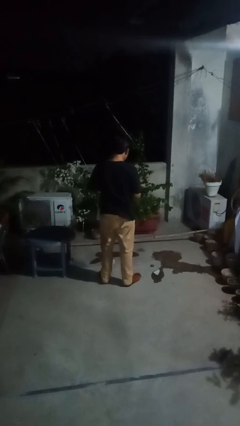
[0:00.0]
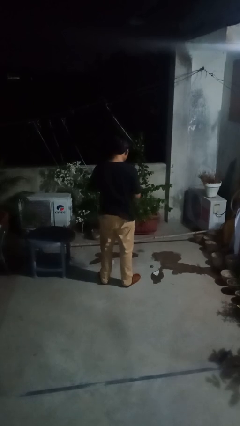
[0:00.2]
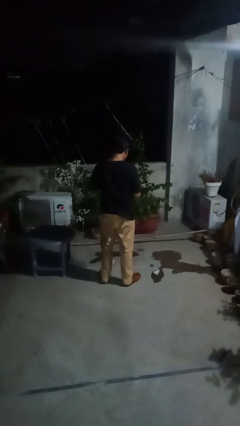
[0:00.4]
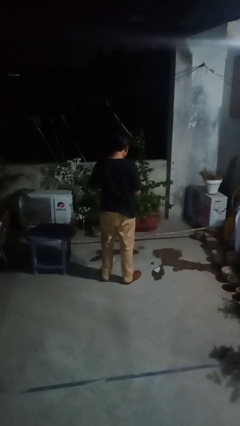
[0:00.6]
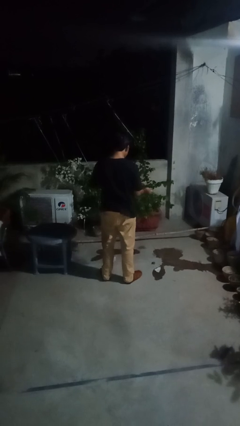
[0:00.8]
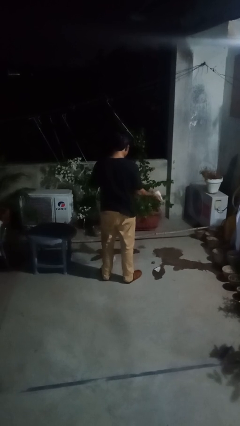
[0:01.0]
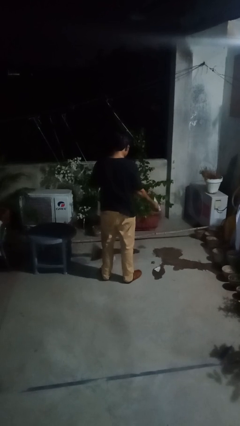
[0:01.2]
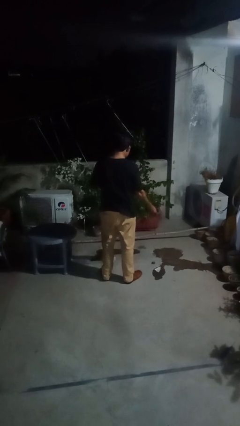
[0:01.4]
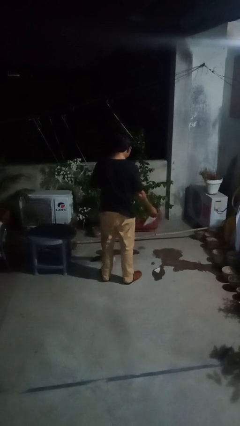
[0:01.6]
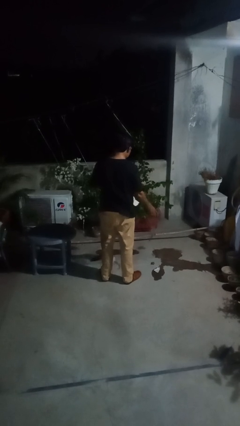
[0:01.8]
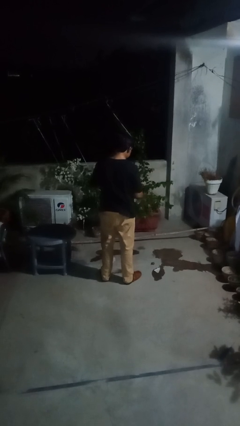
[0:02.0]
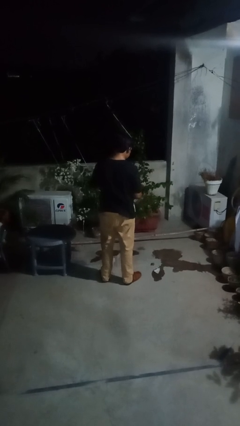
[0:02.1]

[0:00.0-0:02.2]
person tears paper

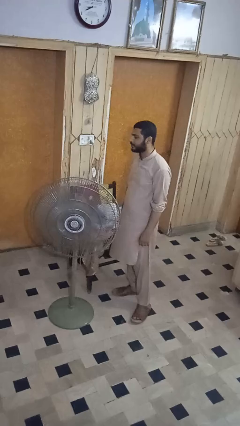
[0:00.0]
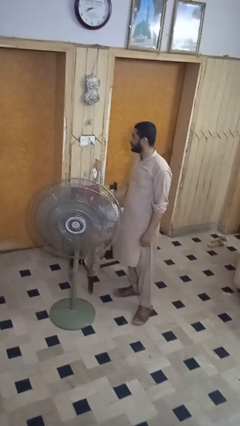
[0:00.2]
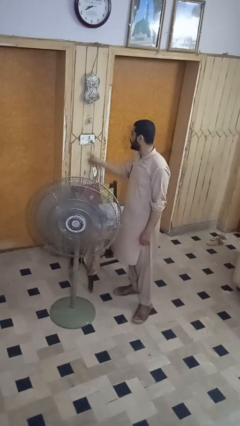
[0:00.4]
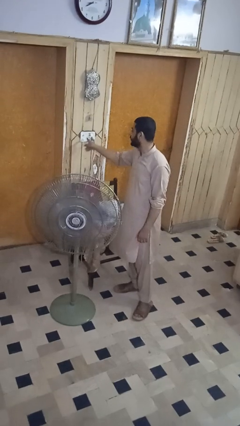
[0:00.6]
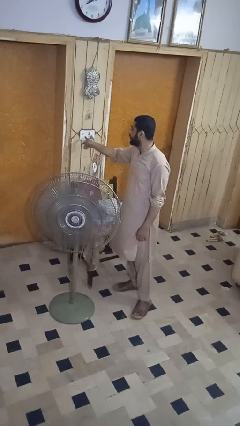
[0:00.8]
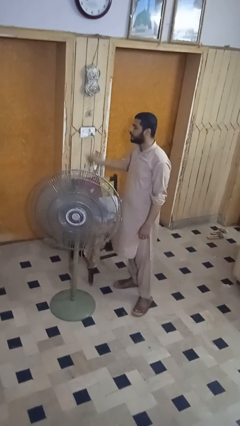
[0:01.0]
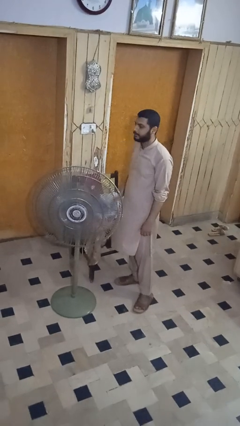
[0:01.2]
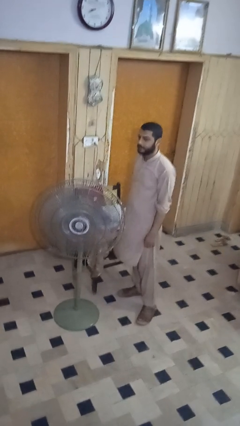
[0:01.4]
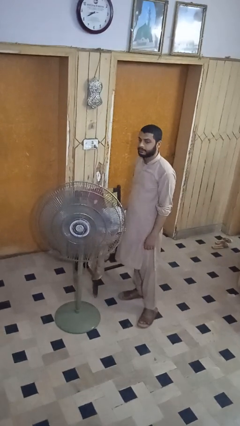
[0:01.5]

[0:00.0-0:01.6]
person turns off fan

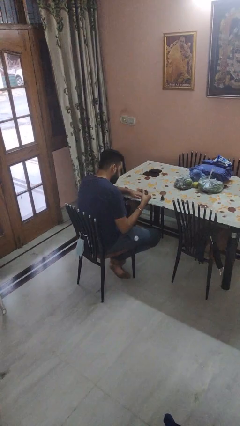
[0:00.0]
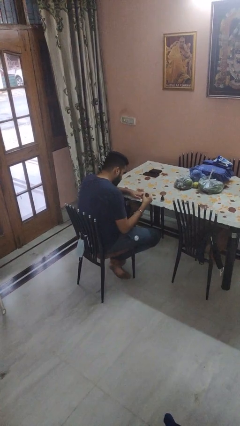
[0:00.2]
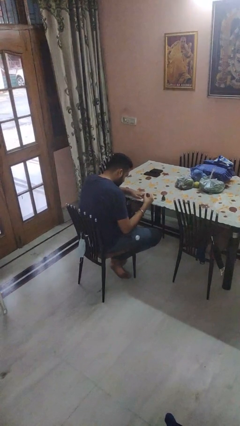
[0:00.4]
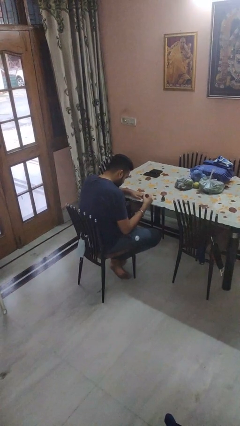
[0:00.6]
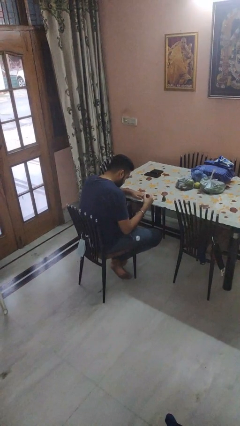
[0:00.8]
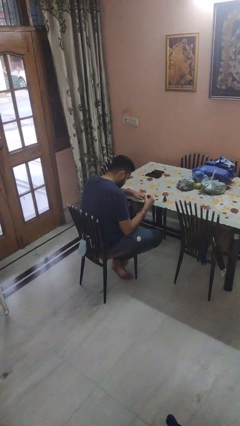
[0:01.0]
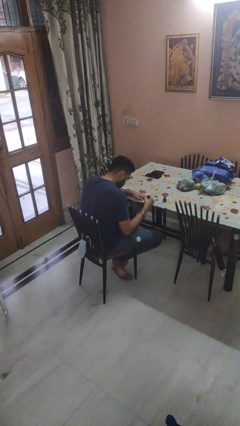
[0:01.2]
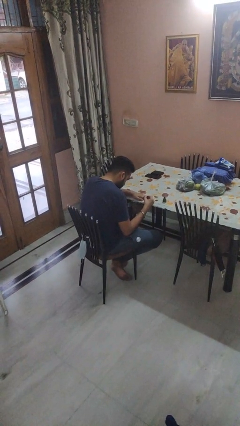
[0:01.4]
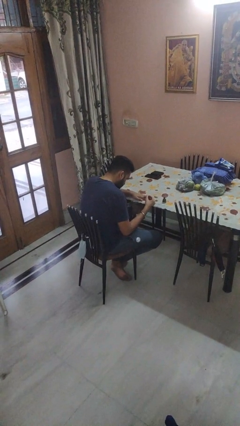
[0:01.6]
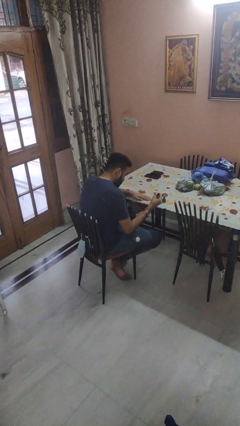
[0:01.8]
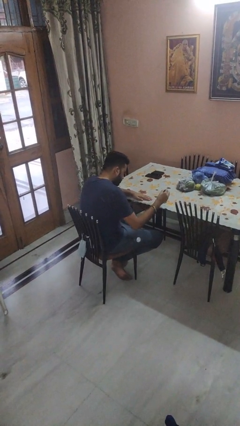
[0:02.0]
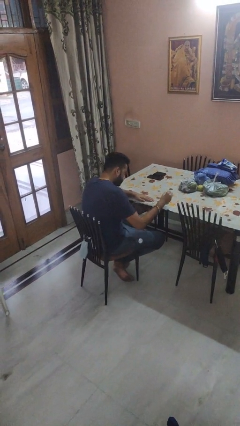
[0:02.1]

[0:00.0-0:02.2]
person paints fingernails

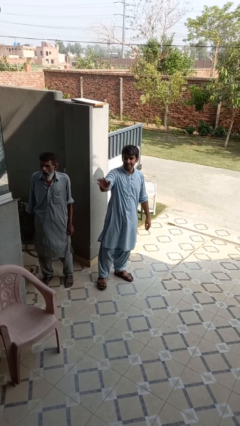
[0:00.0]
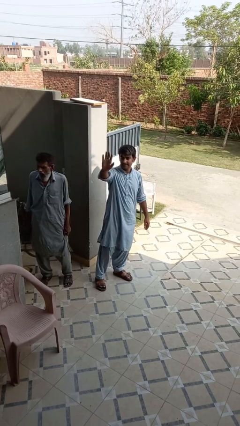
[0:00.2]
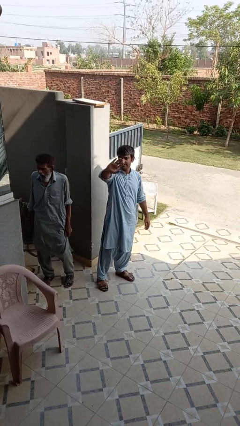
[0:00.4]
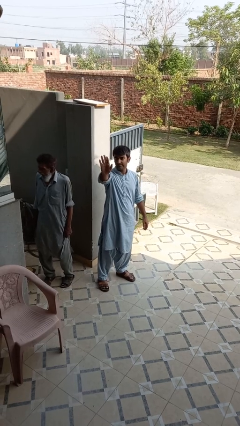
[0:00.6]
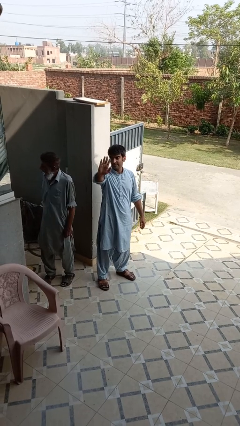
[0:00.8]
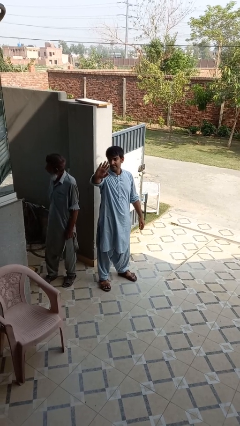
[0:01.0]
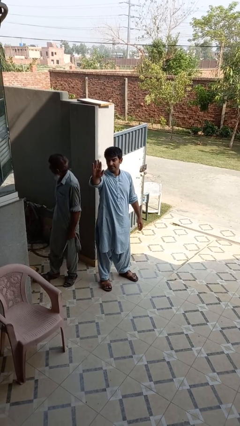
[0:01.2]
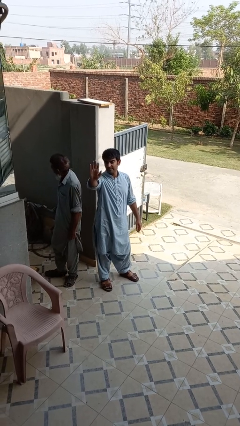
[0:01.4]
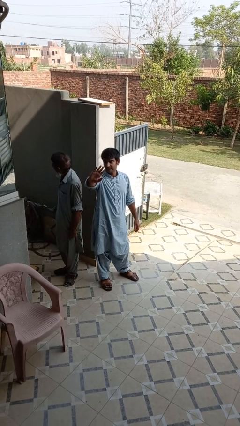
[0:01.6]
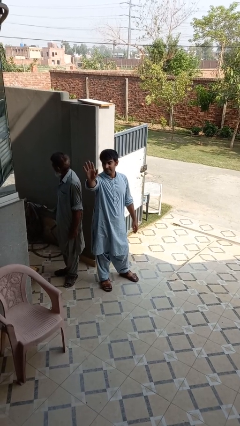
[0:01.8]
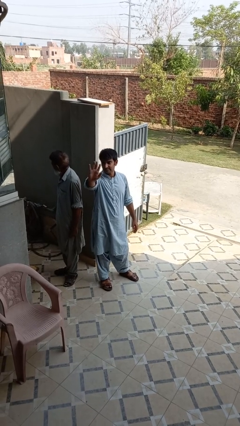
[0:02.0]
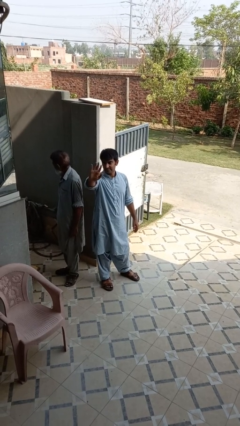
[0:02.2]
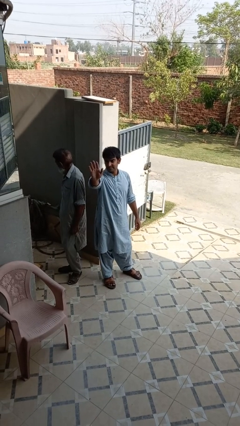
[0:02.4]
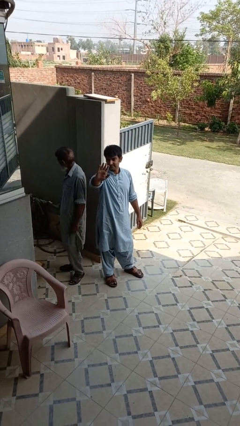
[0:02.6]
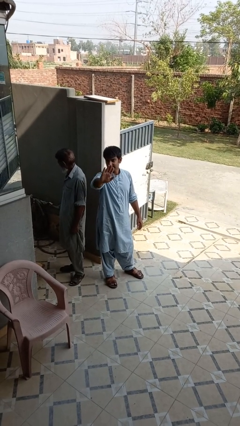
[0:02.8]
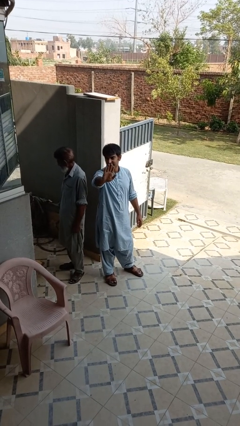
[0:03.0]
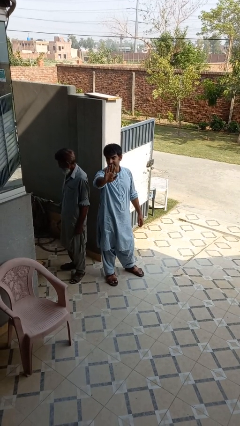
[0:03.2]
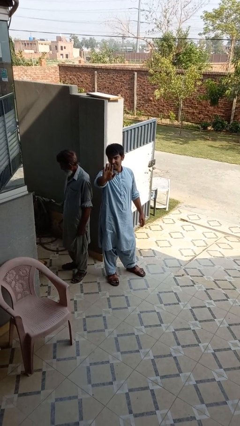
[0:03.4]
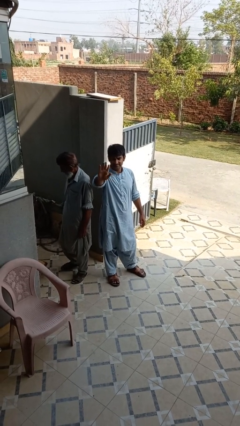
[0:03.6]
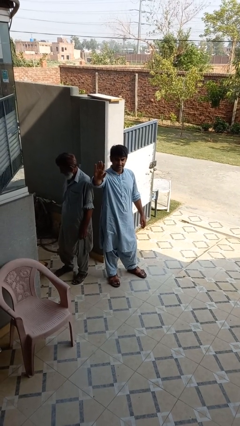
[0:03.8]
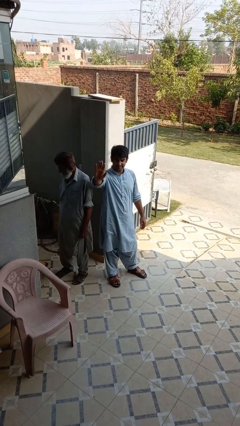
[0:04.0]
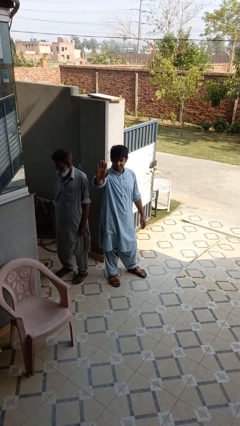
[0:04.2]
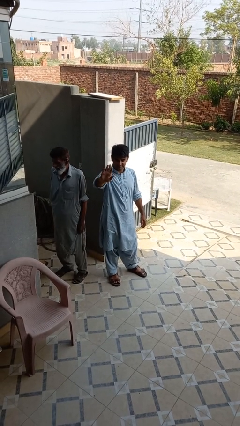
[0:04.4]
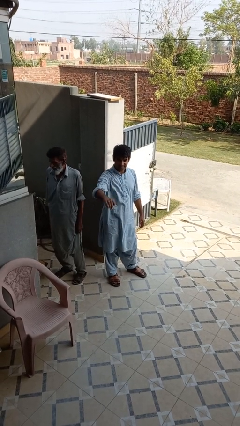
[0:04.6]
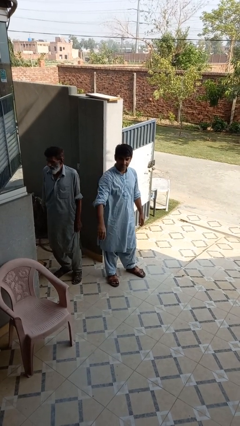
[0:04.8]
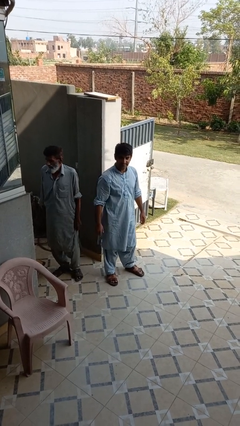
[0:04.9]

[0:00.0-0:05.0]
person waves at person

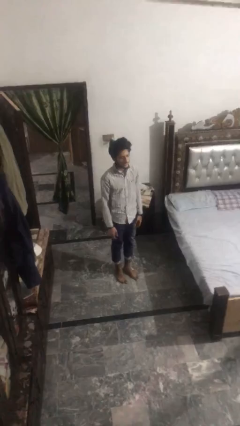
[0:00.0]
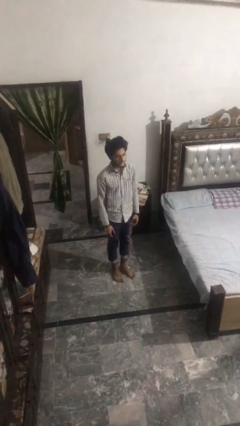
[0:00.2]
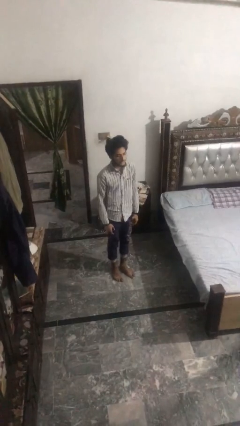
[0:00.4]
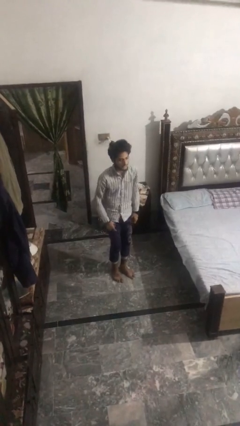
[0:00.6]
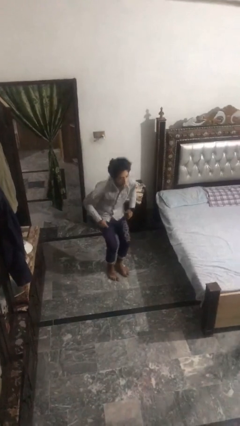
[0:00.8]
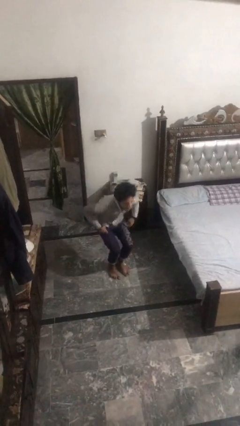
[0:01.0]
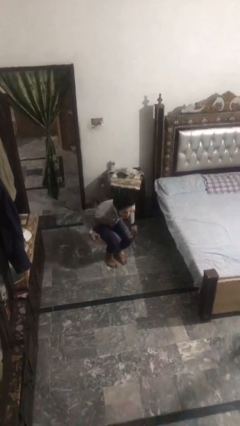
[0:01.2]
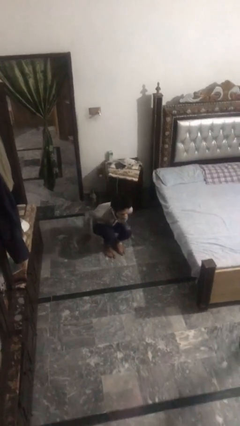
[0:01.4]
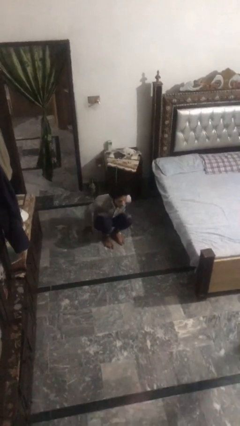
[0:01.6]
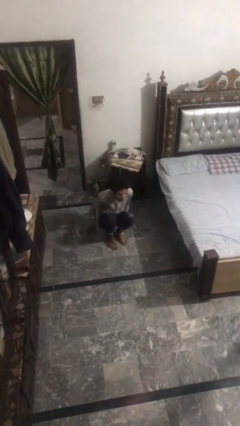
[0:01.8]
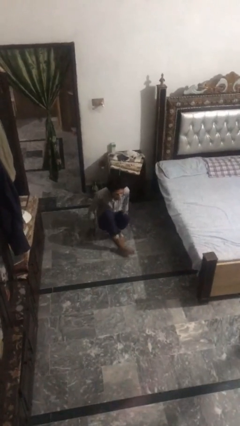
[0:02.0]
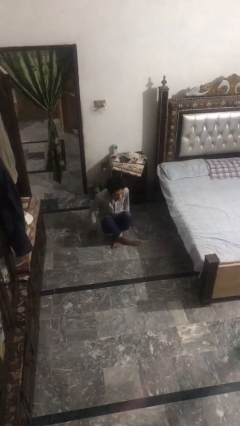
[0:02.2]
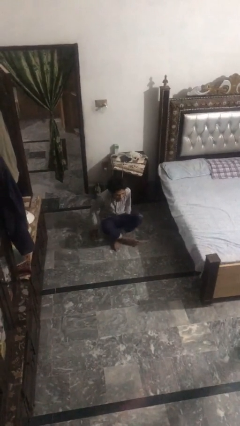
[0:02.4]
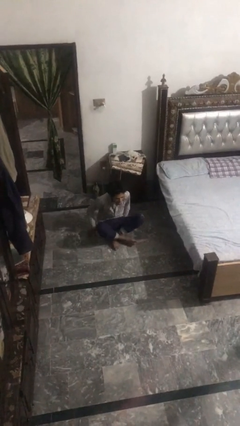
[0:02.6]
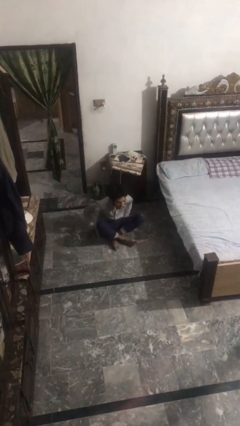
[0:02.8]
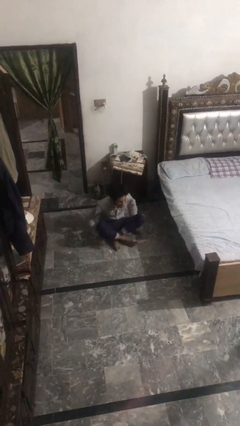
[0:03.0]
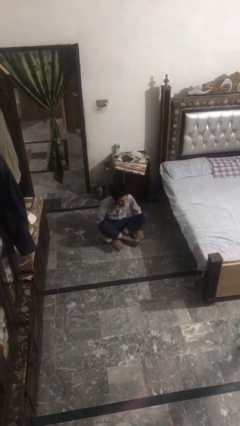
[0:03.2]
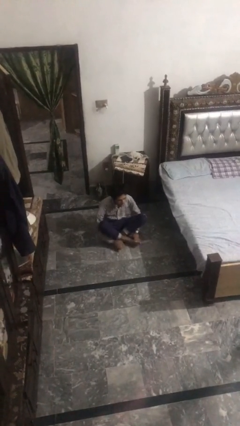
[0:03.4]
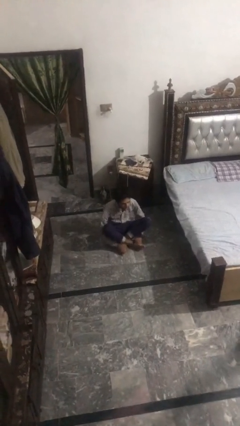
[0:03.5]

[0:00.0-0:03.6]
person sits crisscross

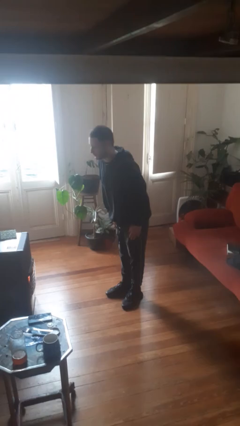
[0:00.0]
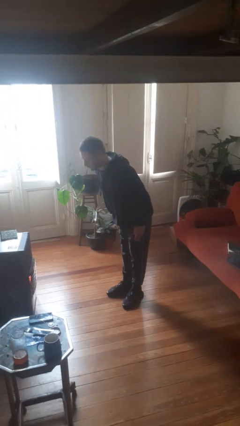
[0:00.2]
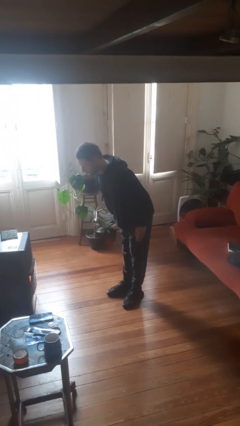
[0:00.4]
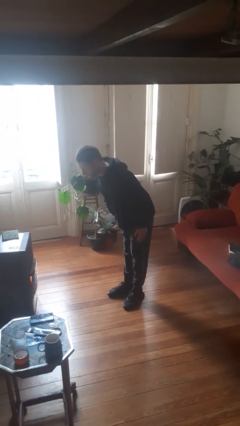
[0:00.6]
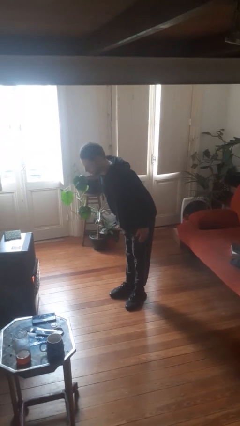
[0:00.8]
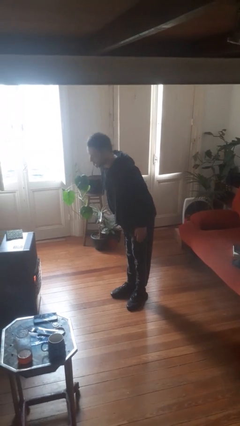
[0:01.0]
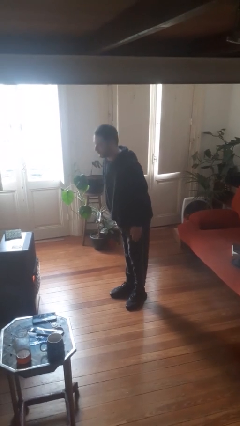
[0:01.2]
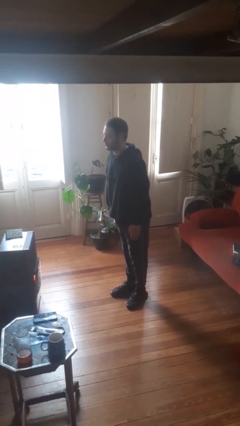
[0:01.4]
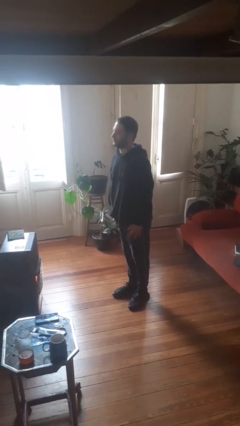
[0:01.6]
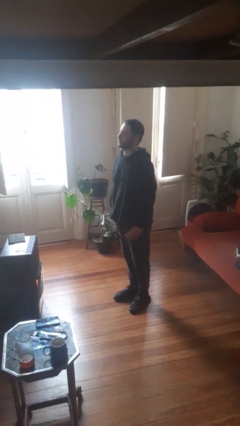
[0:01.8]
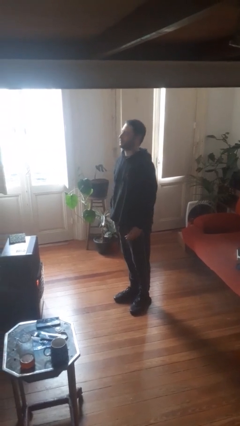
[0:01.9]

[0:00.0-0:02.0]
person bows

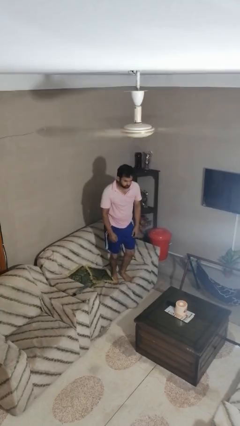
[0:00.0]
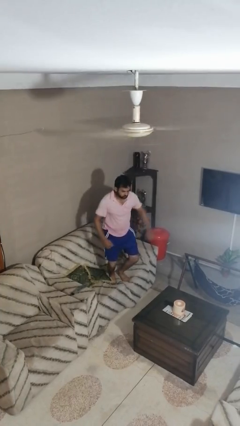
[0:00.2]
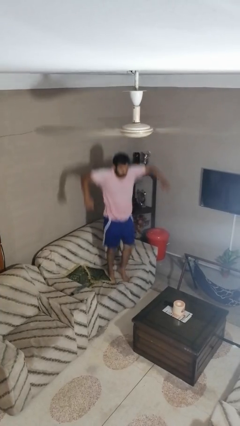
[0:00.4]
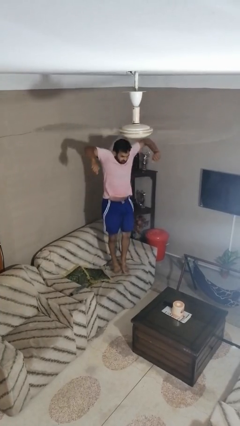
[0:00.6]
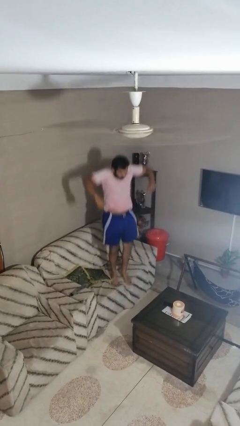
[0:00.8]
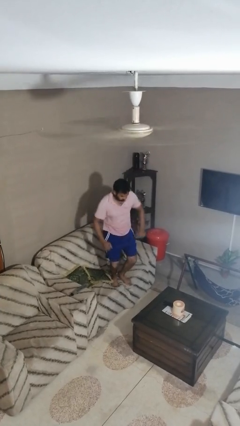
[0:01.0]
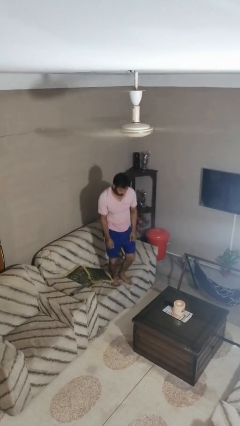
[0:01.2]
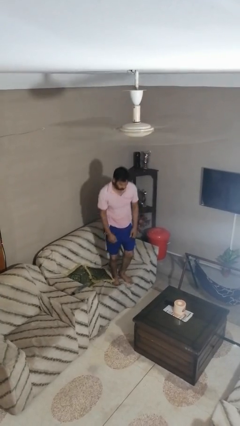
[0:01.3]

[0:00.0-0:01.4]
person jumps on couch
